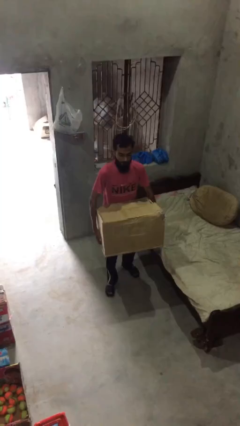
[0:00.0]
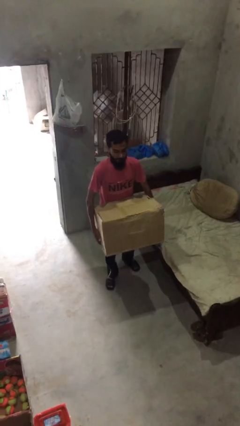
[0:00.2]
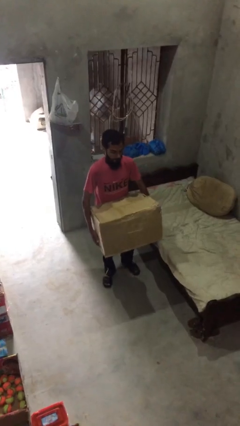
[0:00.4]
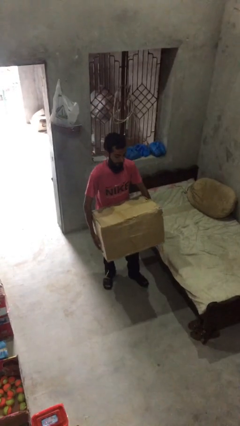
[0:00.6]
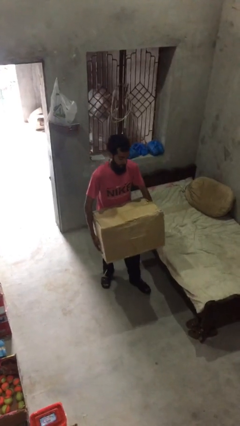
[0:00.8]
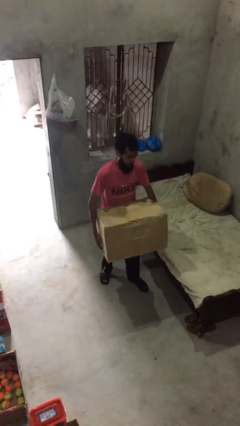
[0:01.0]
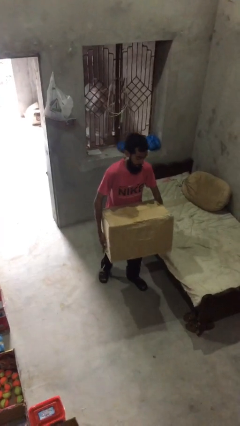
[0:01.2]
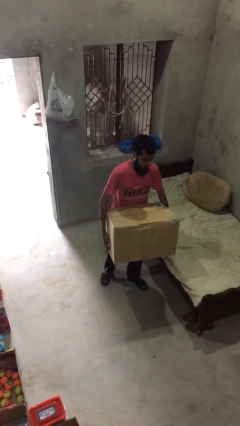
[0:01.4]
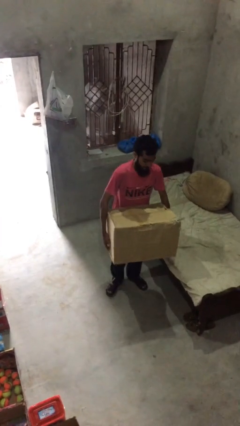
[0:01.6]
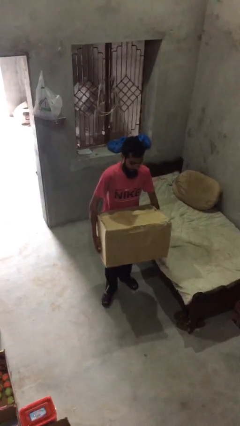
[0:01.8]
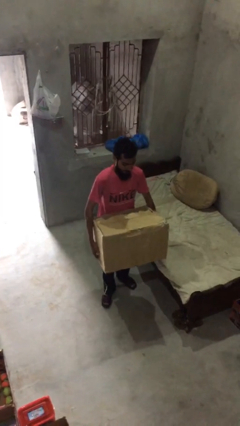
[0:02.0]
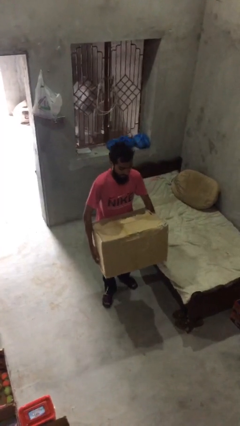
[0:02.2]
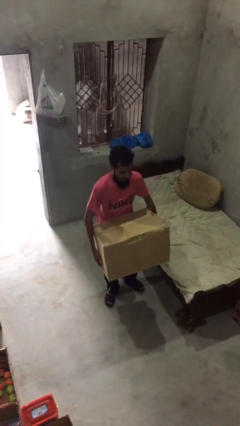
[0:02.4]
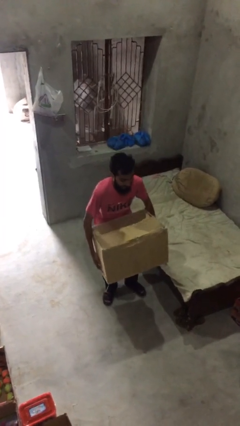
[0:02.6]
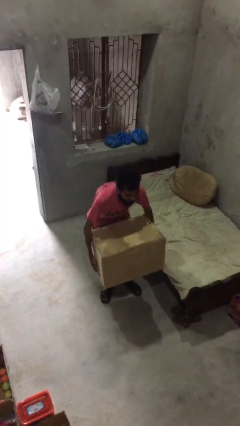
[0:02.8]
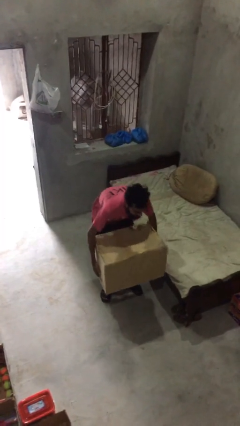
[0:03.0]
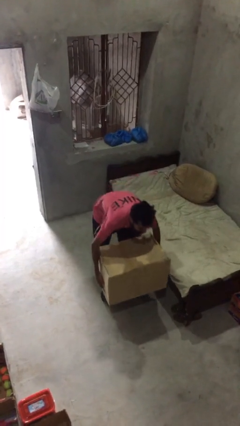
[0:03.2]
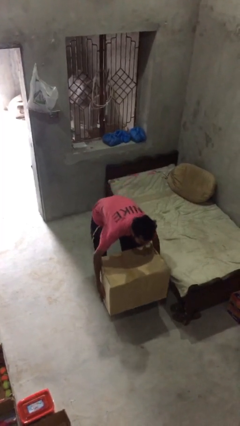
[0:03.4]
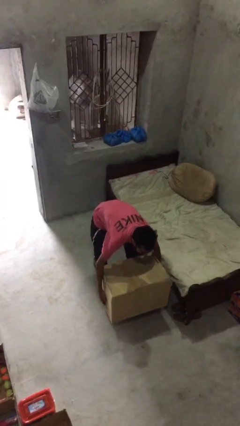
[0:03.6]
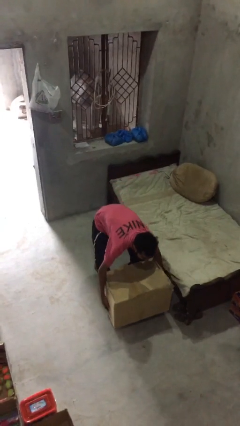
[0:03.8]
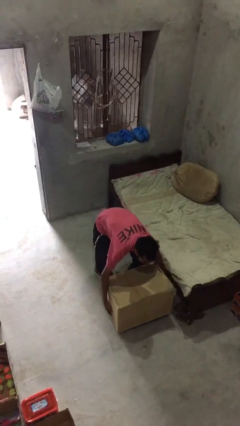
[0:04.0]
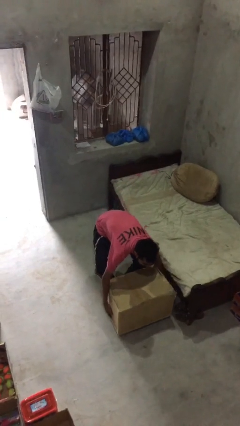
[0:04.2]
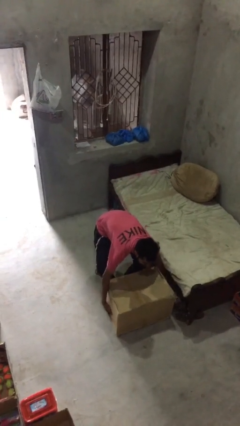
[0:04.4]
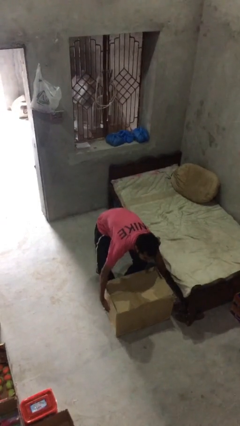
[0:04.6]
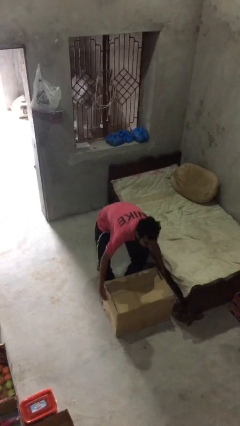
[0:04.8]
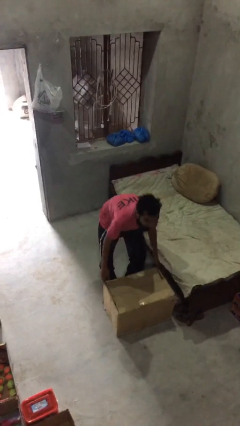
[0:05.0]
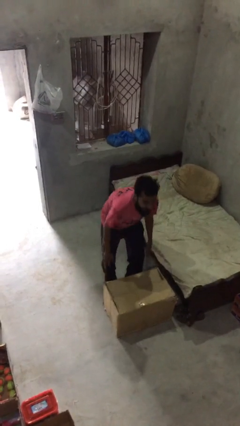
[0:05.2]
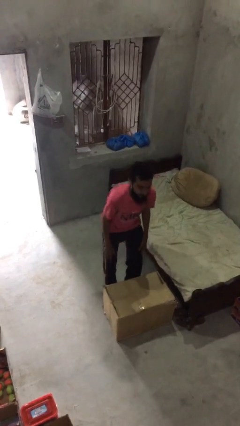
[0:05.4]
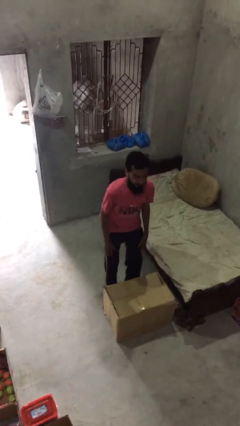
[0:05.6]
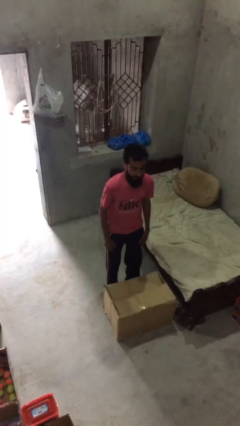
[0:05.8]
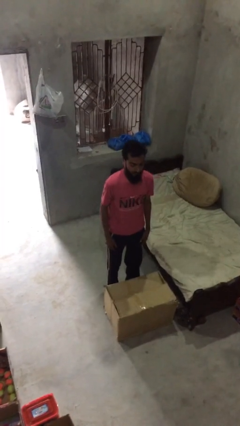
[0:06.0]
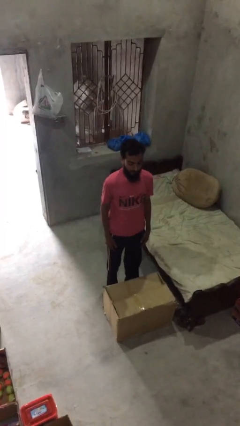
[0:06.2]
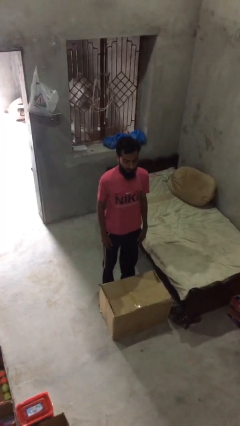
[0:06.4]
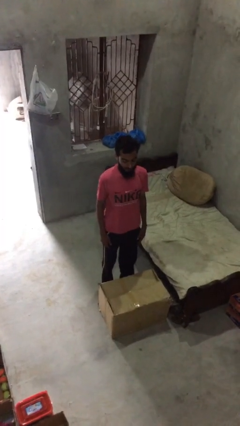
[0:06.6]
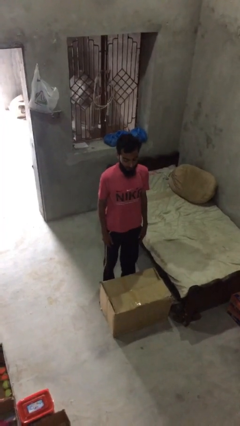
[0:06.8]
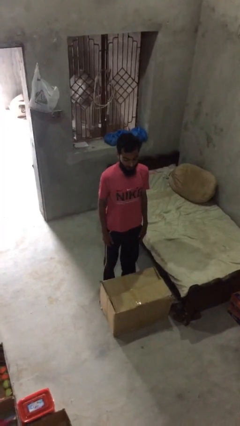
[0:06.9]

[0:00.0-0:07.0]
person puts down object on floor

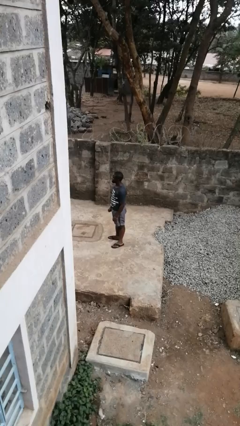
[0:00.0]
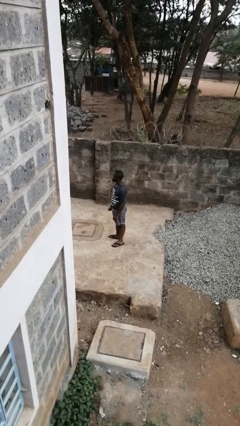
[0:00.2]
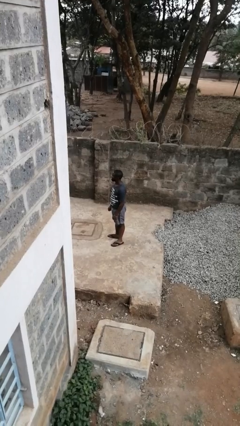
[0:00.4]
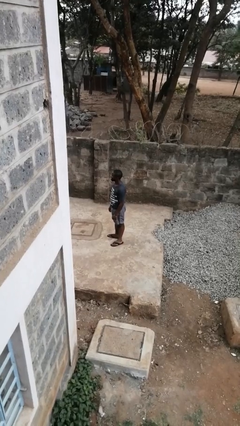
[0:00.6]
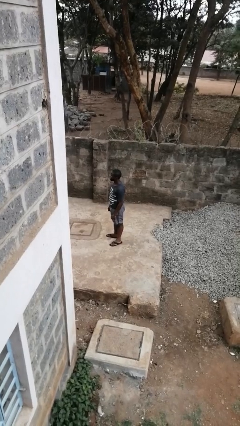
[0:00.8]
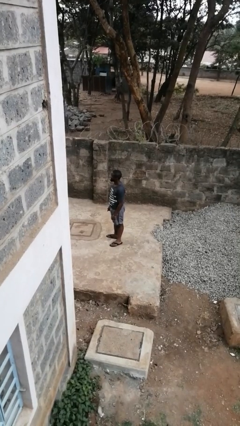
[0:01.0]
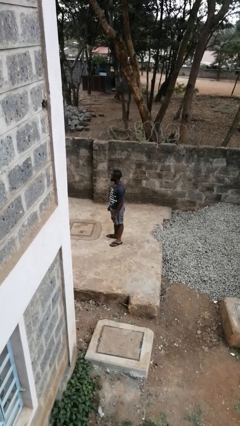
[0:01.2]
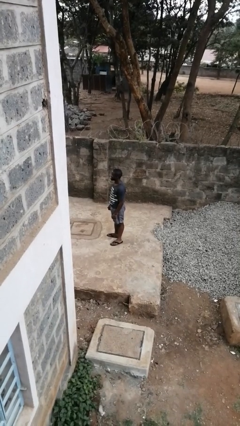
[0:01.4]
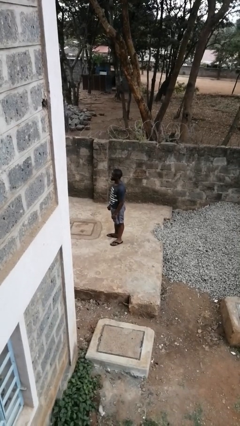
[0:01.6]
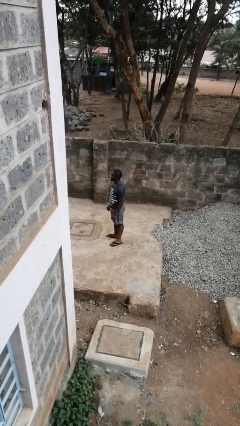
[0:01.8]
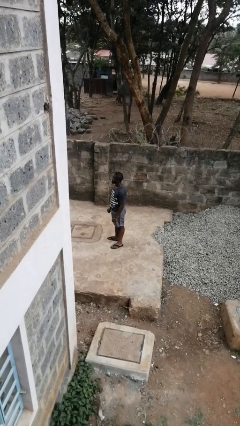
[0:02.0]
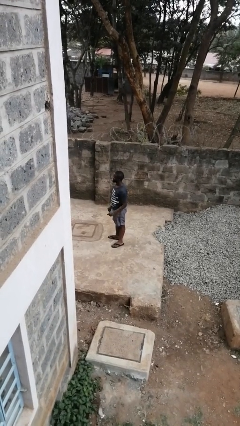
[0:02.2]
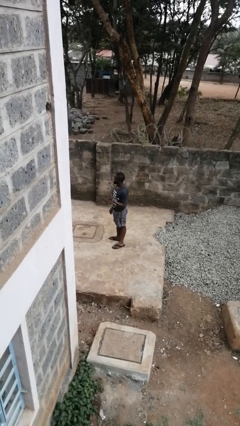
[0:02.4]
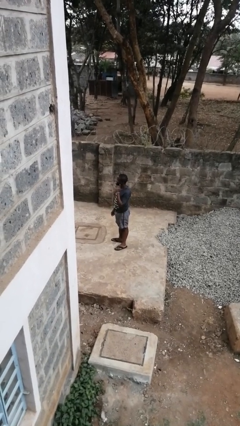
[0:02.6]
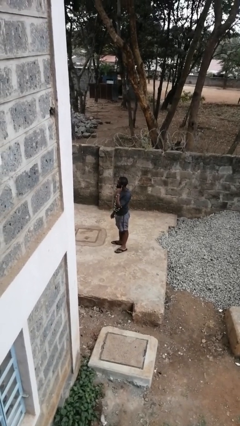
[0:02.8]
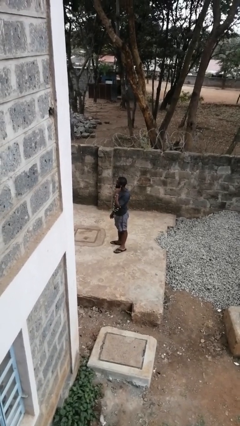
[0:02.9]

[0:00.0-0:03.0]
person gestures listen closely

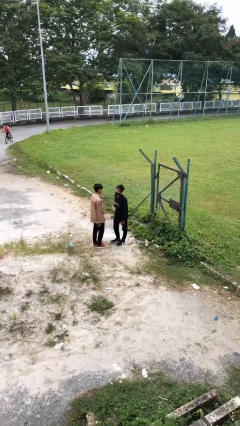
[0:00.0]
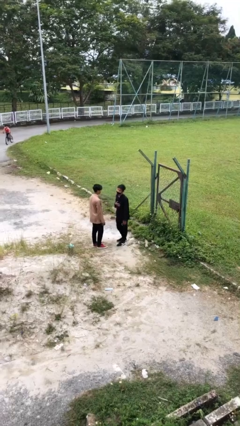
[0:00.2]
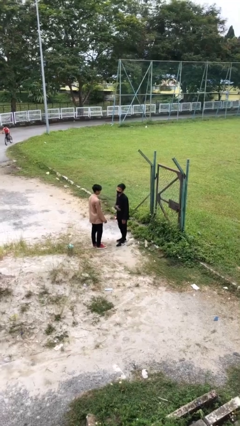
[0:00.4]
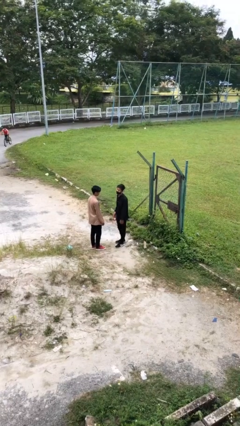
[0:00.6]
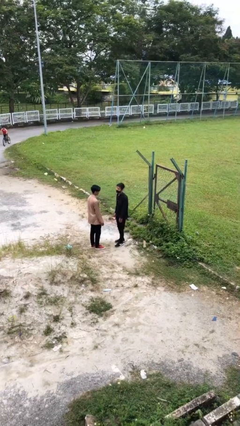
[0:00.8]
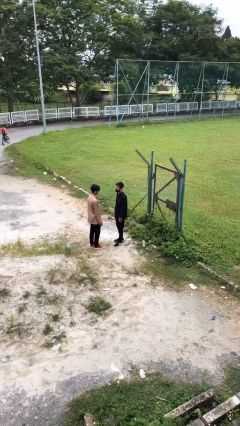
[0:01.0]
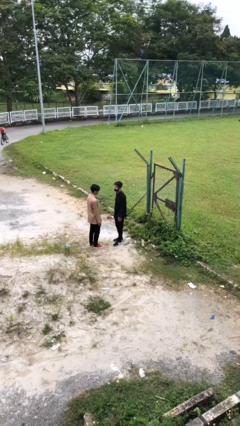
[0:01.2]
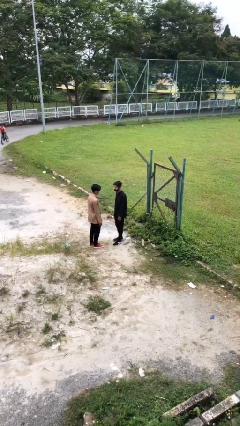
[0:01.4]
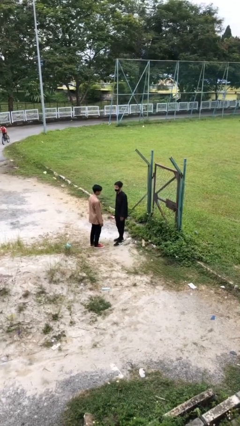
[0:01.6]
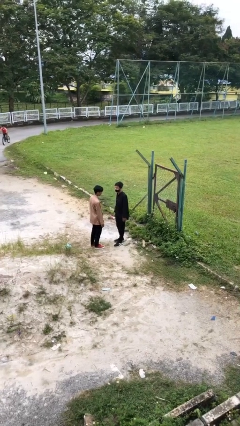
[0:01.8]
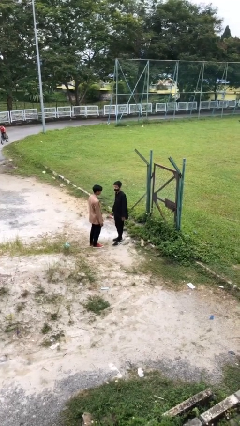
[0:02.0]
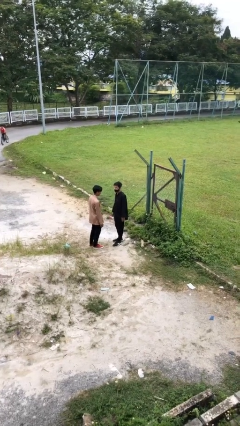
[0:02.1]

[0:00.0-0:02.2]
person talks to person

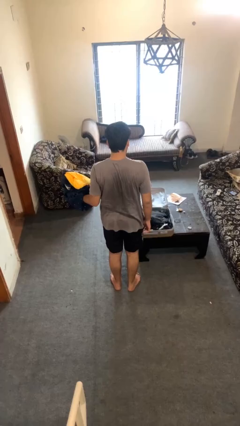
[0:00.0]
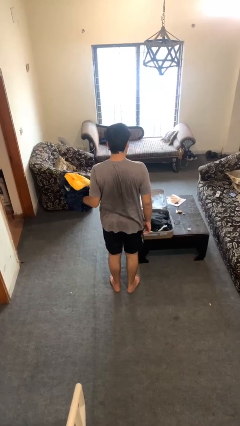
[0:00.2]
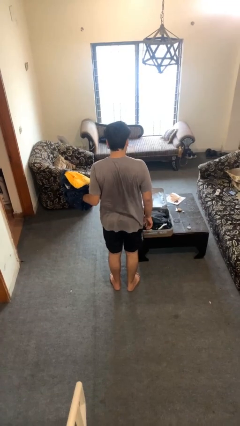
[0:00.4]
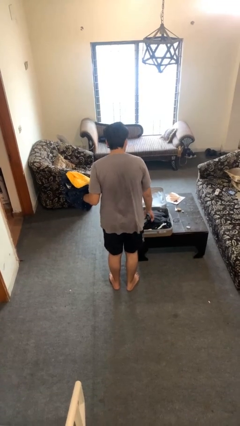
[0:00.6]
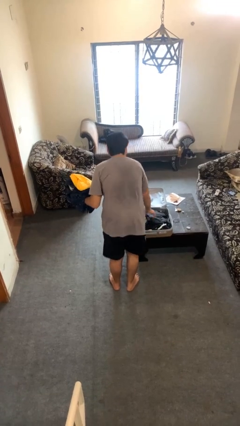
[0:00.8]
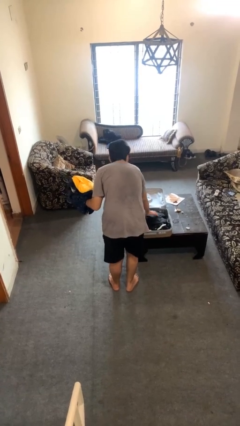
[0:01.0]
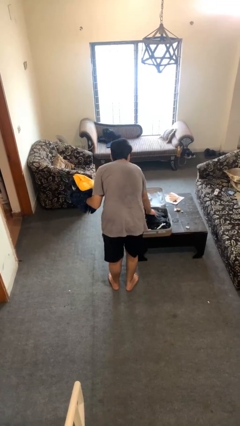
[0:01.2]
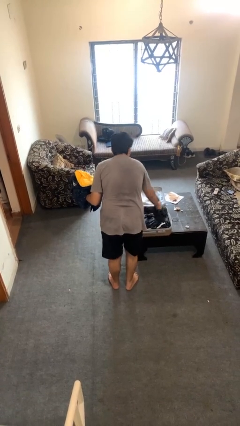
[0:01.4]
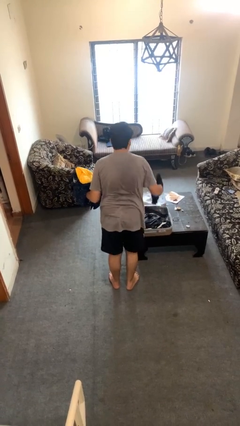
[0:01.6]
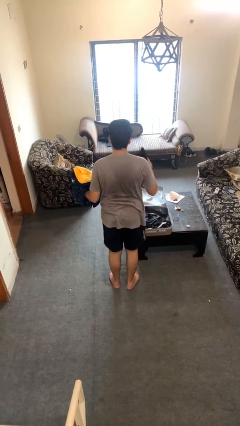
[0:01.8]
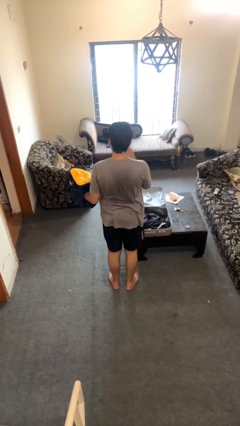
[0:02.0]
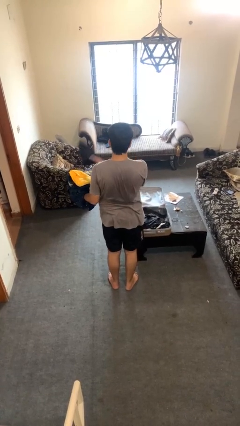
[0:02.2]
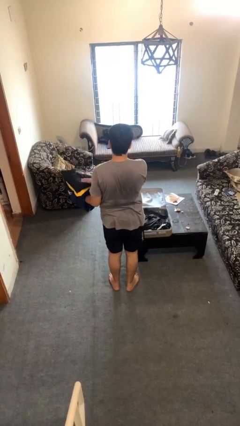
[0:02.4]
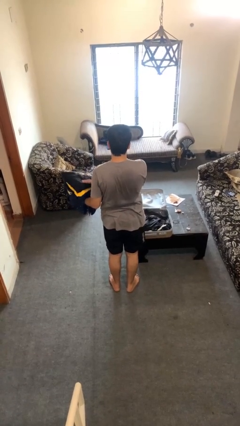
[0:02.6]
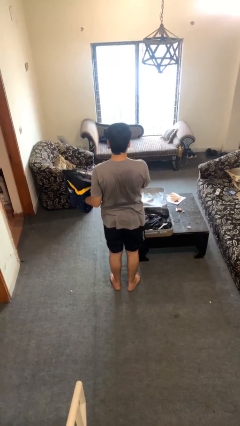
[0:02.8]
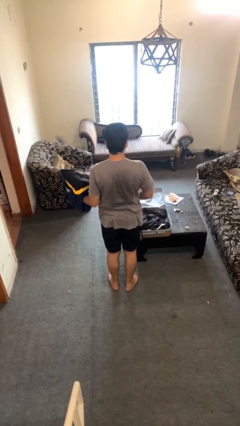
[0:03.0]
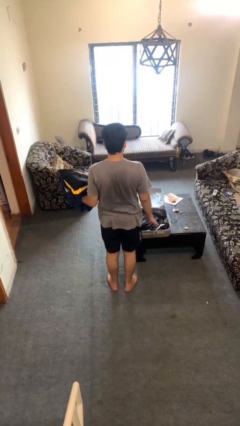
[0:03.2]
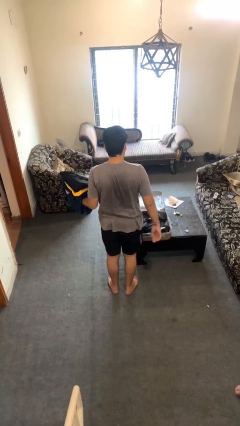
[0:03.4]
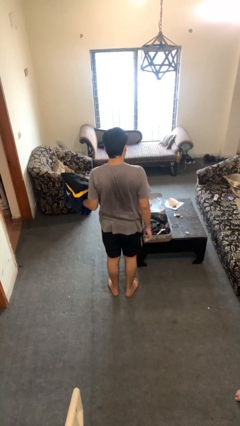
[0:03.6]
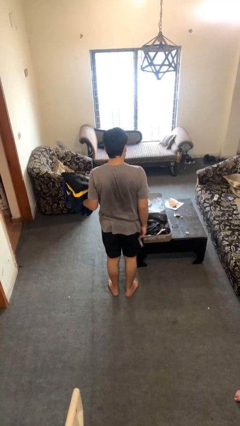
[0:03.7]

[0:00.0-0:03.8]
person unloads clothes from suitcase

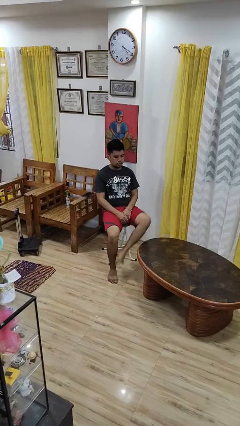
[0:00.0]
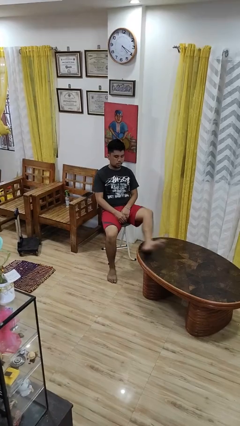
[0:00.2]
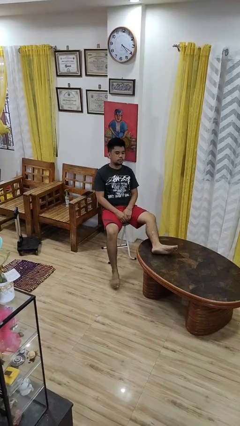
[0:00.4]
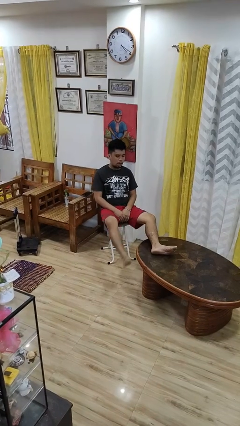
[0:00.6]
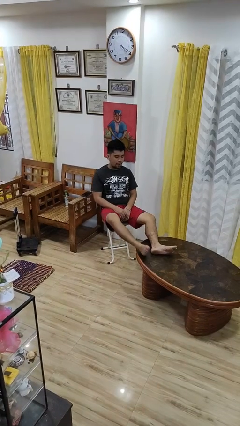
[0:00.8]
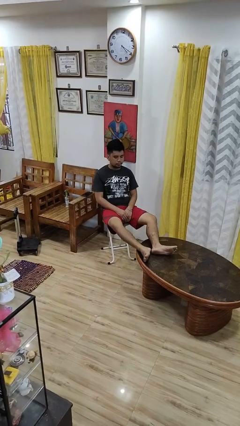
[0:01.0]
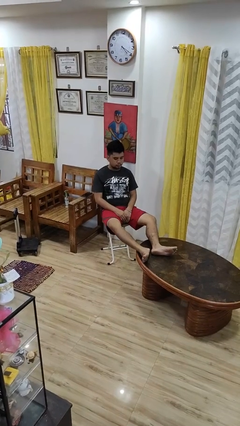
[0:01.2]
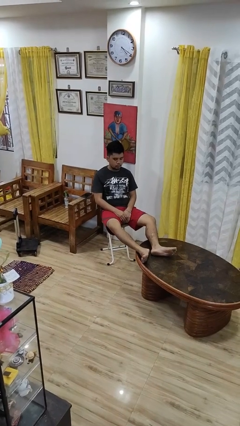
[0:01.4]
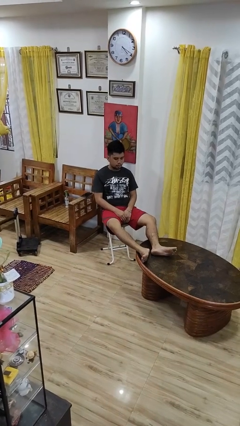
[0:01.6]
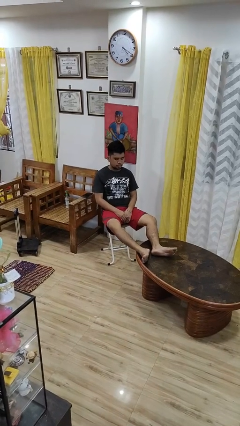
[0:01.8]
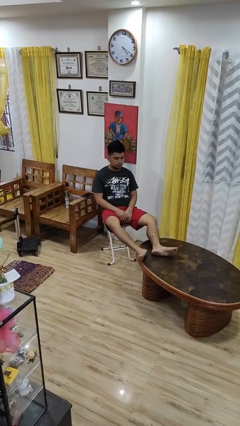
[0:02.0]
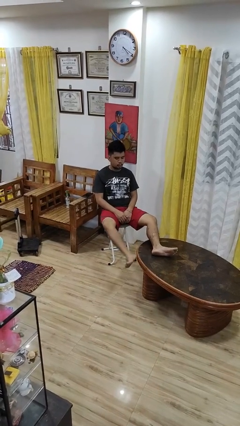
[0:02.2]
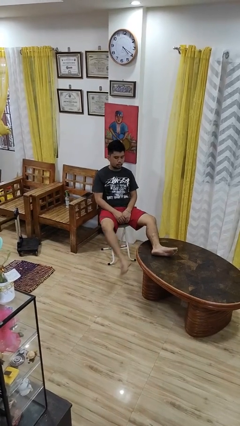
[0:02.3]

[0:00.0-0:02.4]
person puts feet up
